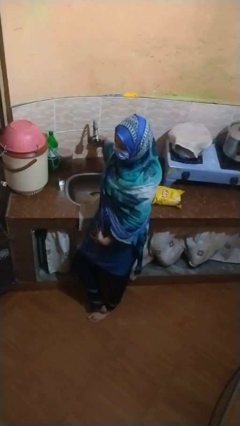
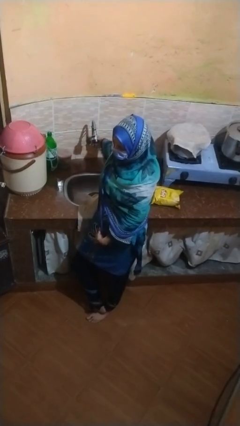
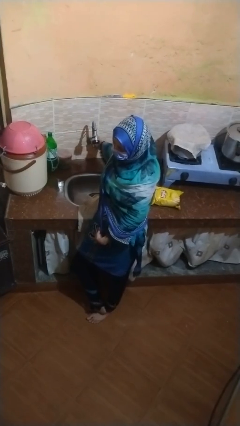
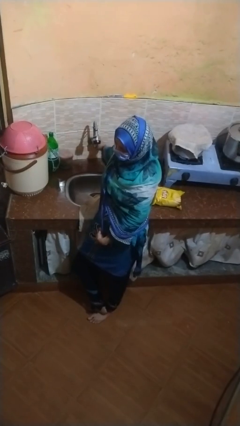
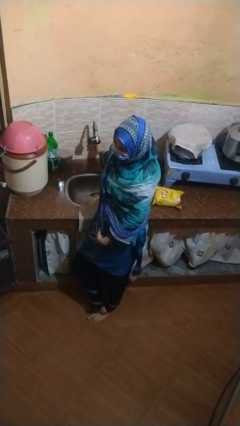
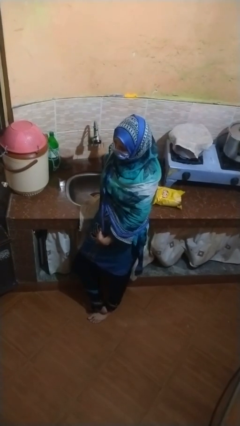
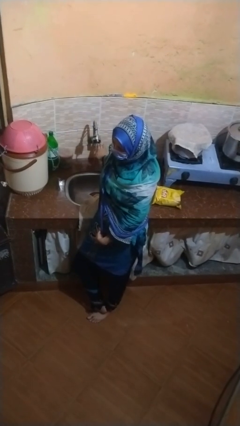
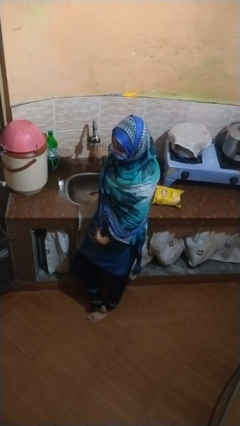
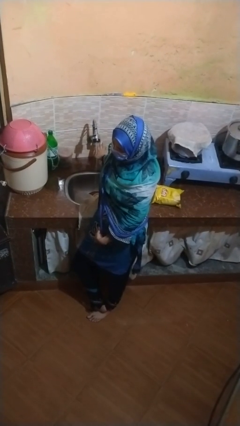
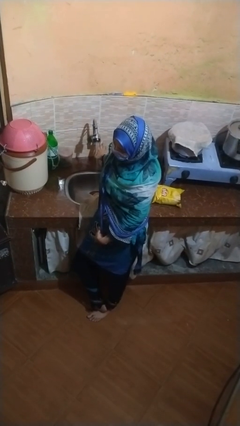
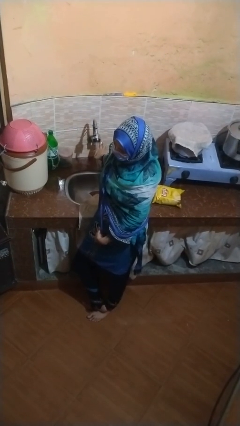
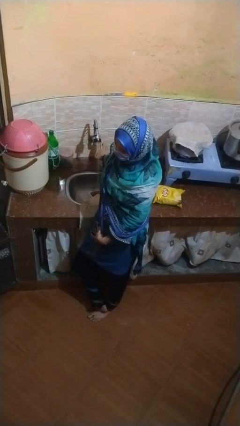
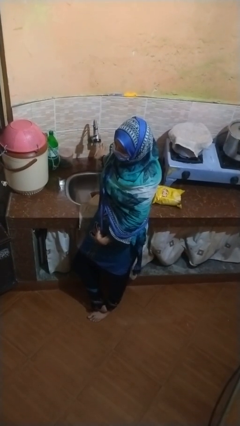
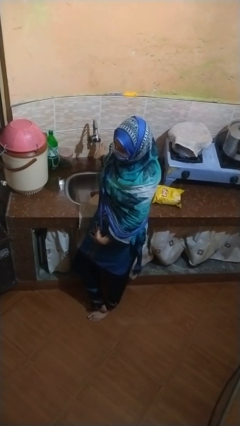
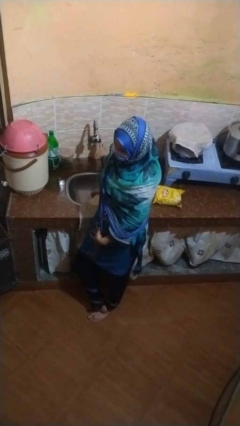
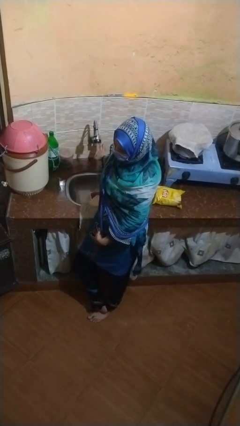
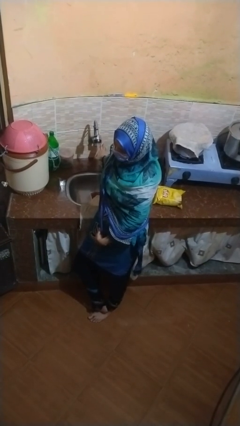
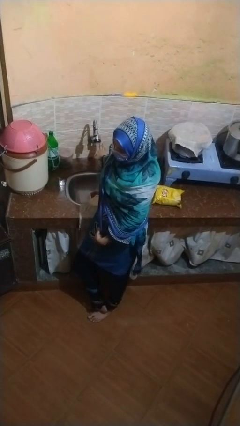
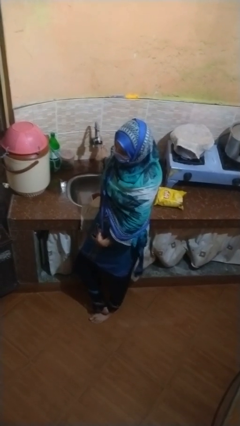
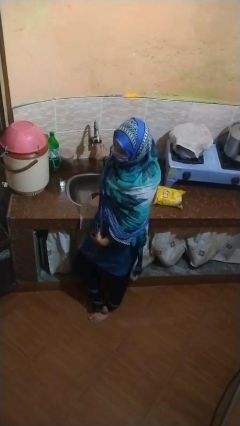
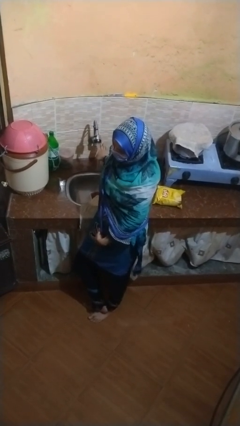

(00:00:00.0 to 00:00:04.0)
person turns on faucet

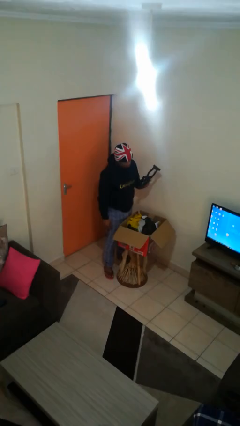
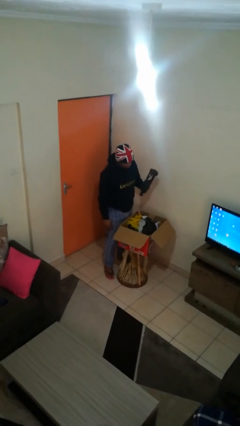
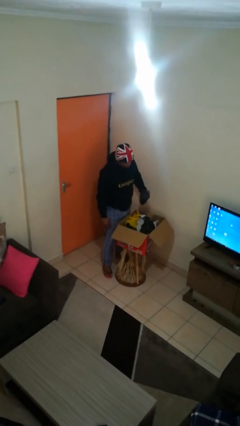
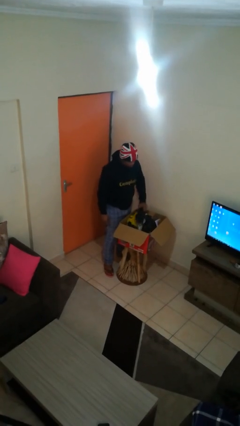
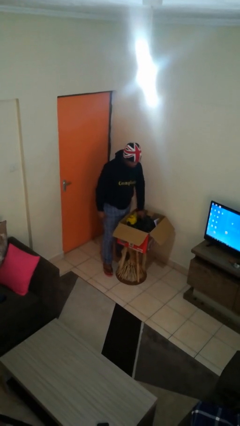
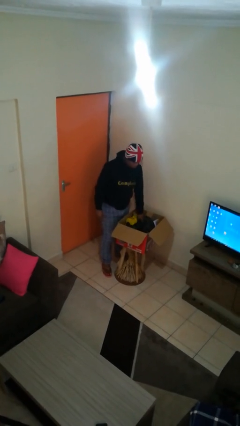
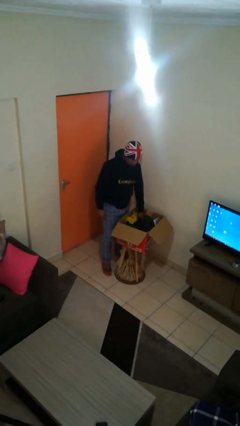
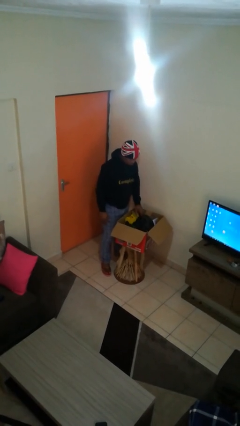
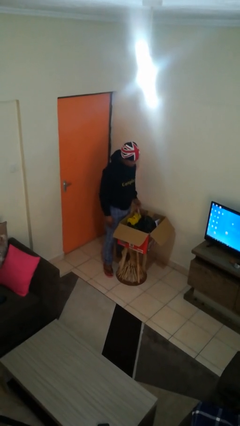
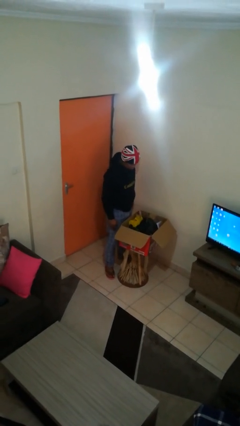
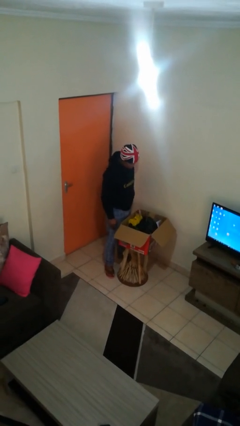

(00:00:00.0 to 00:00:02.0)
person puts object into box

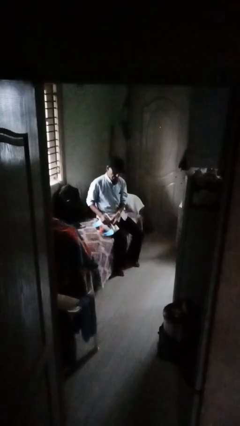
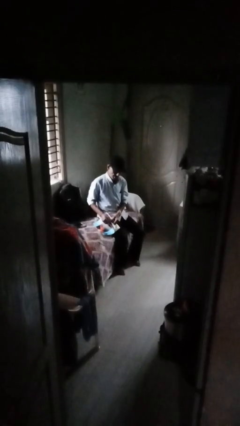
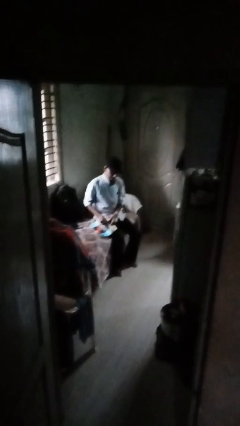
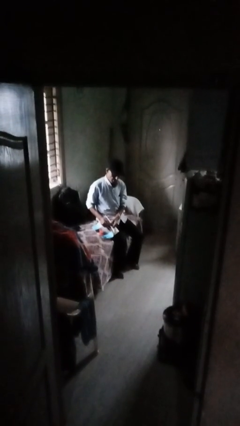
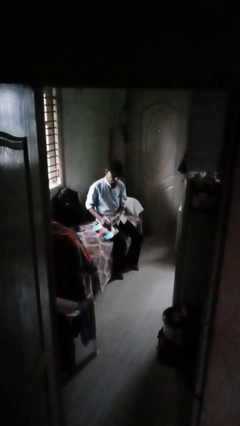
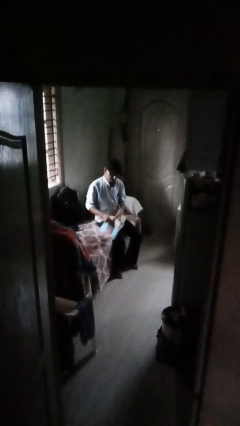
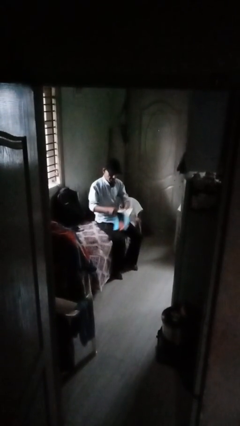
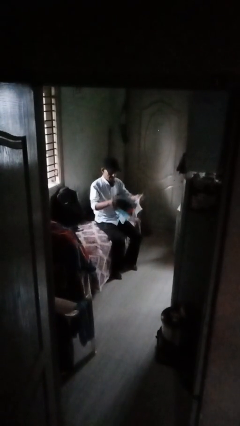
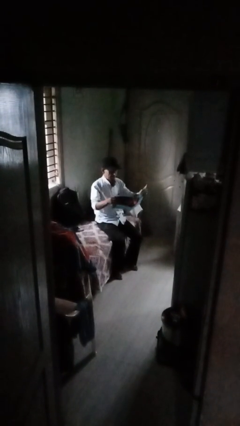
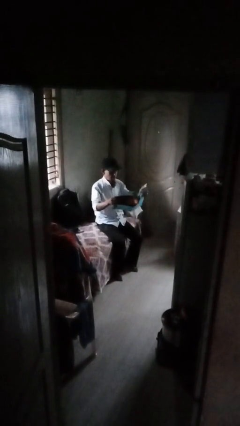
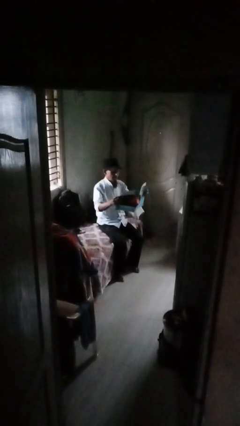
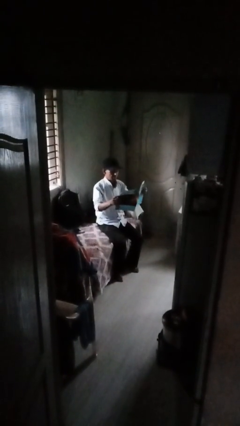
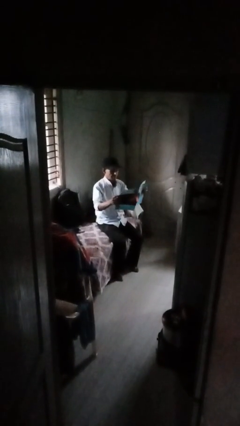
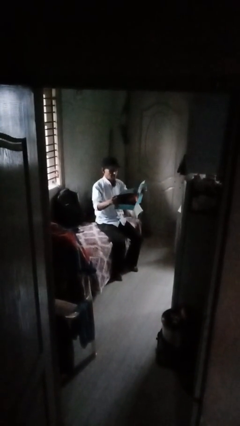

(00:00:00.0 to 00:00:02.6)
person reads magazine

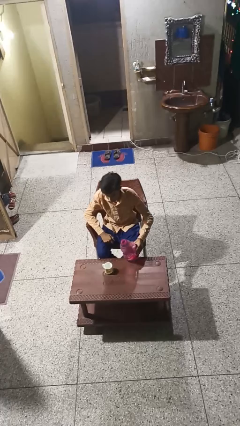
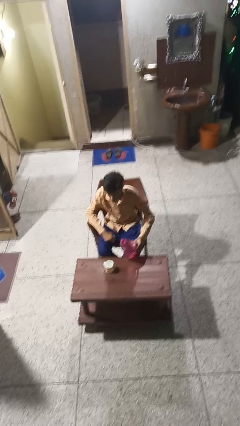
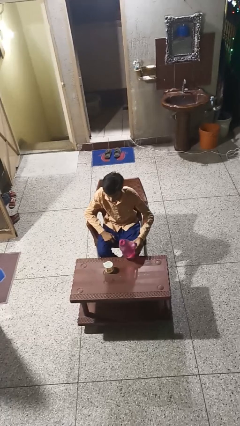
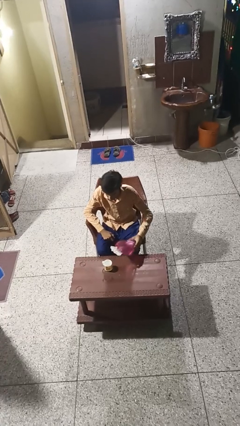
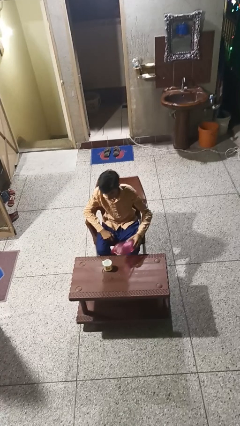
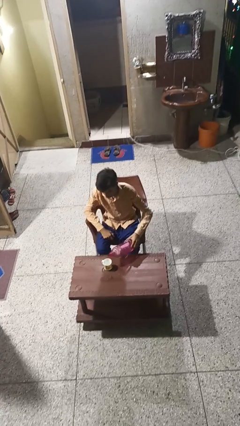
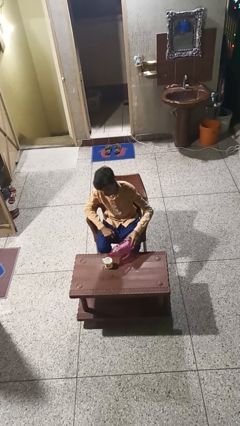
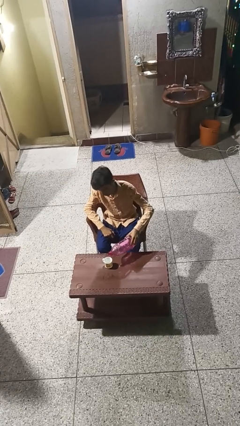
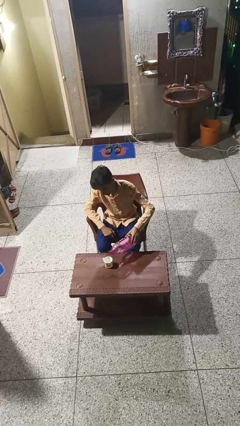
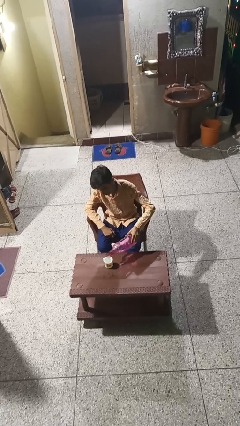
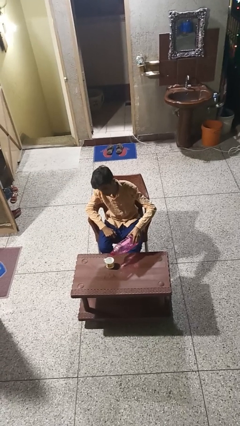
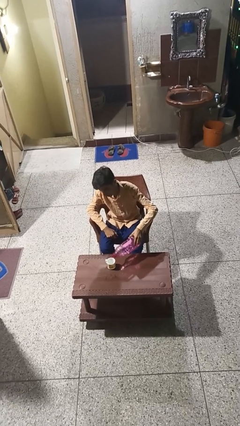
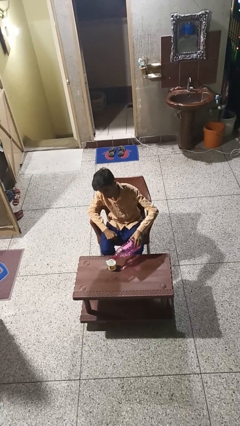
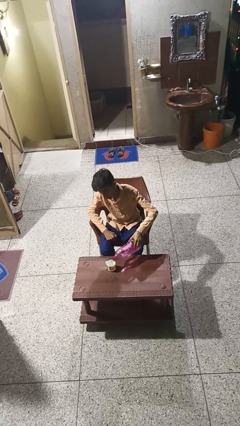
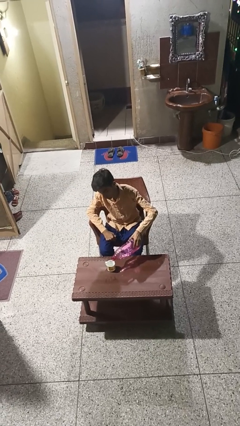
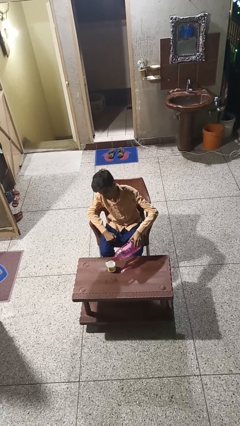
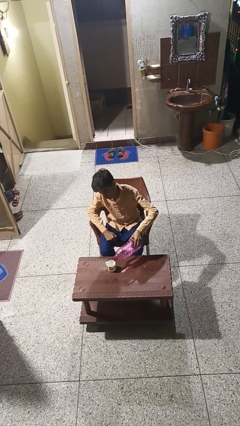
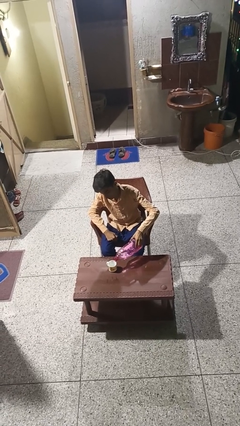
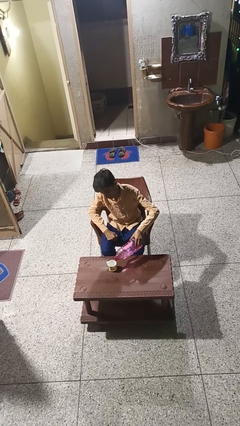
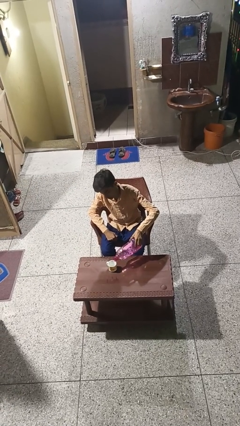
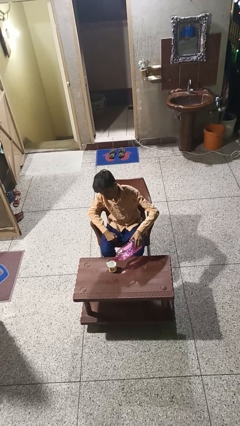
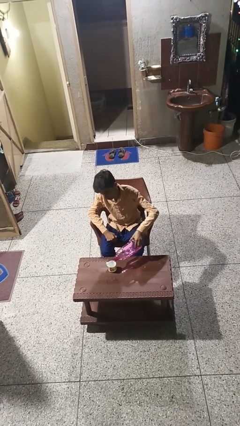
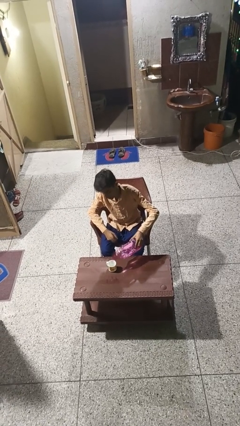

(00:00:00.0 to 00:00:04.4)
person pours liquid into cup

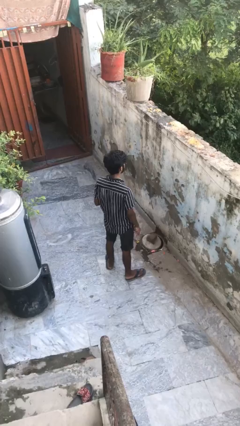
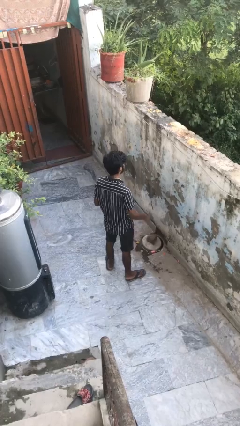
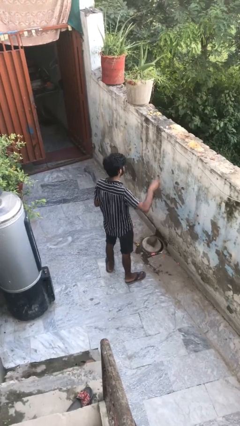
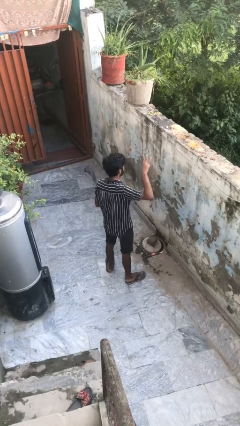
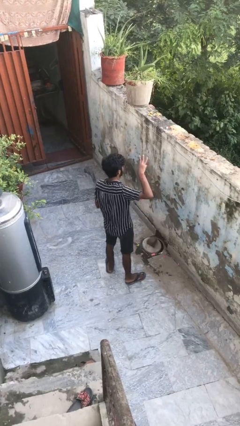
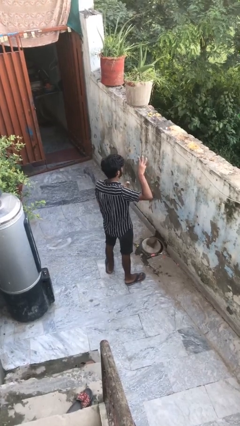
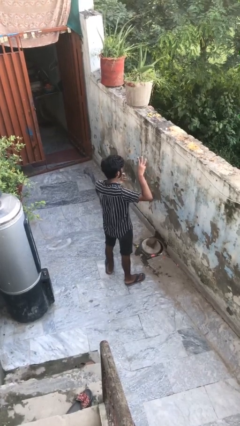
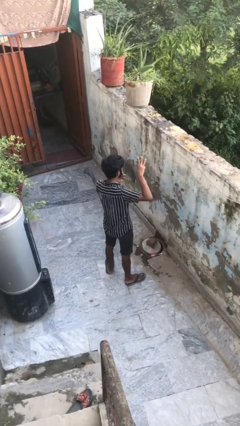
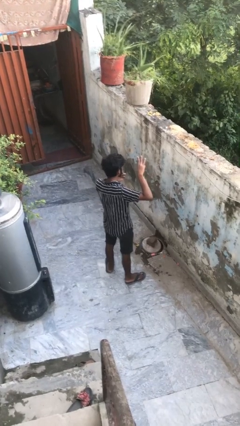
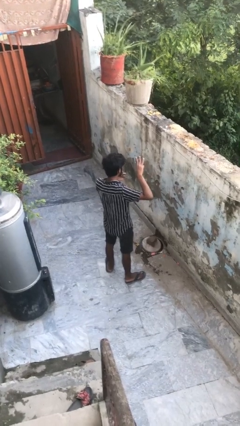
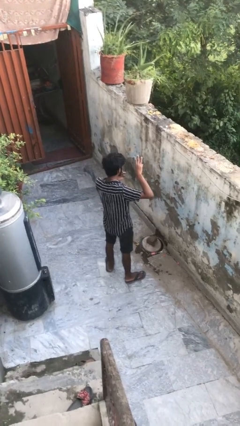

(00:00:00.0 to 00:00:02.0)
person gestures number three

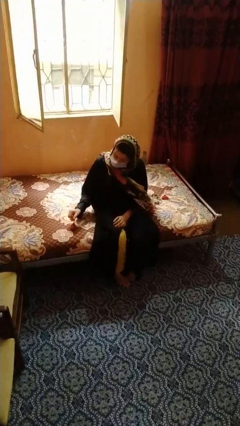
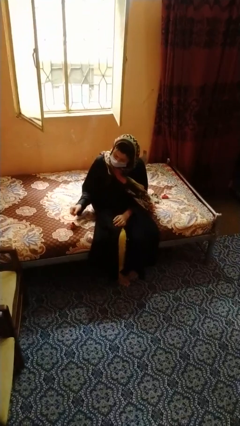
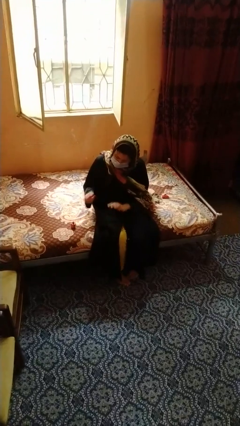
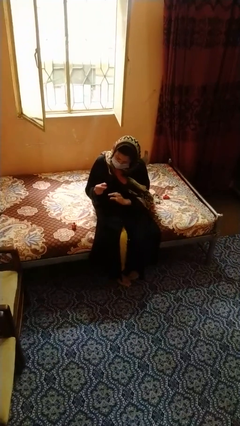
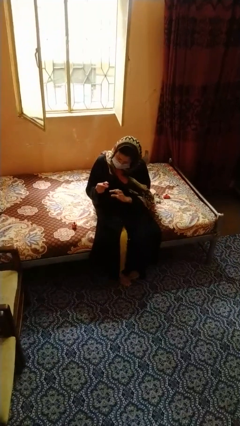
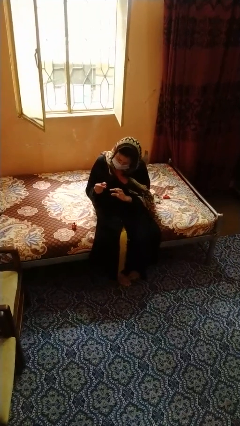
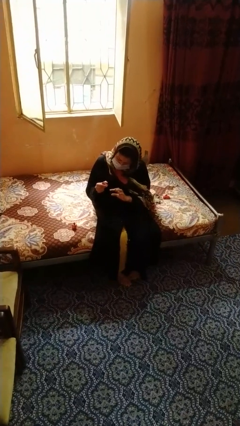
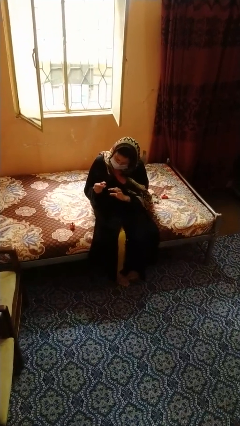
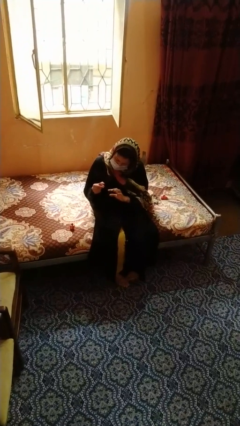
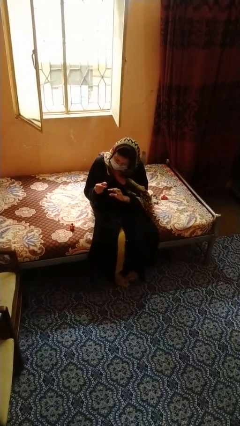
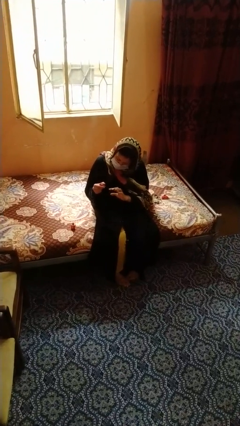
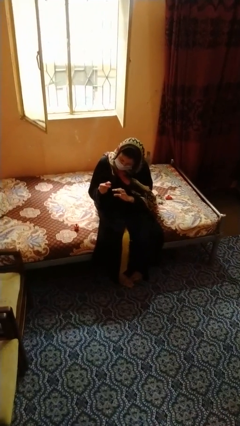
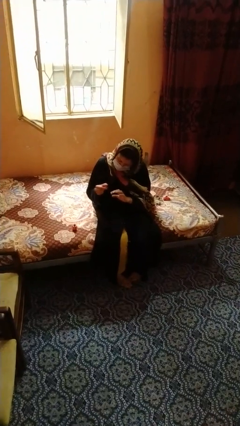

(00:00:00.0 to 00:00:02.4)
person paints fingernails
